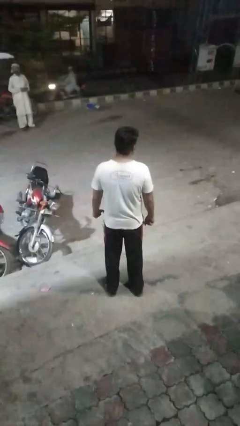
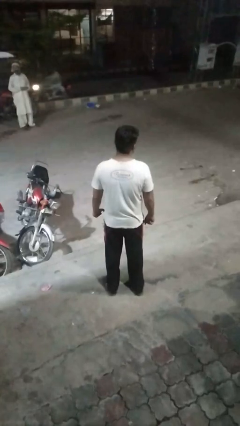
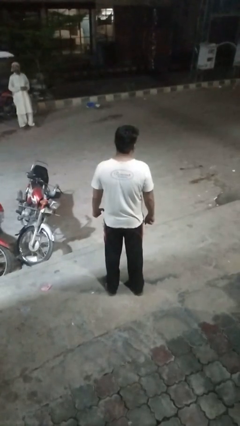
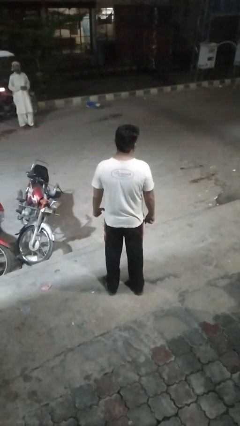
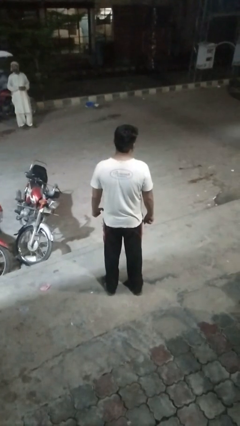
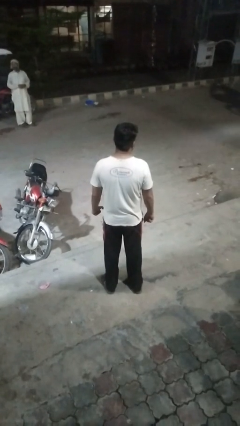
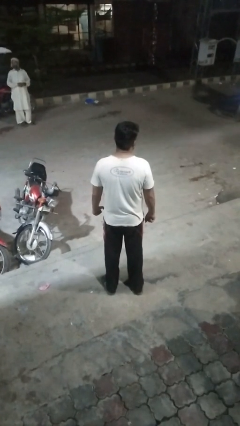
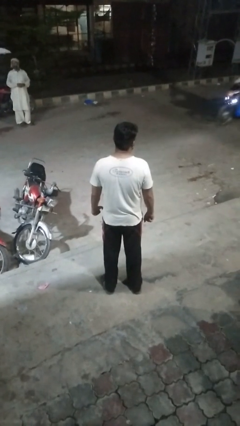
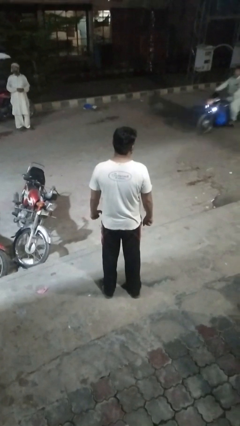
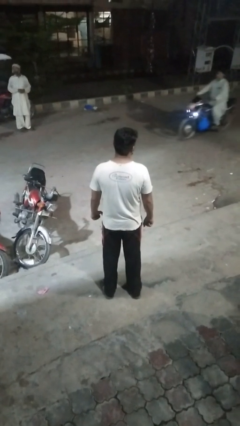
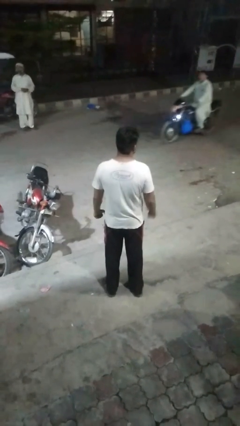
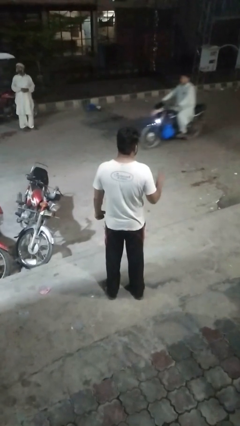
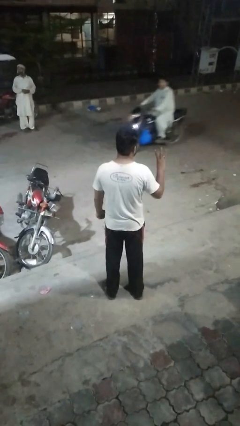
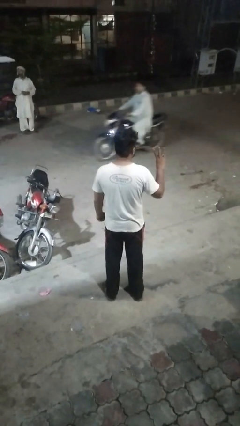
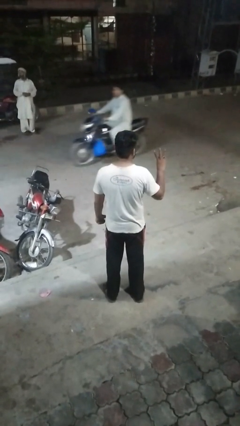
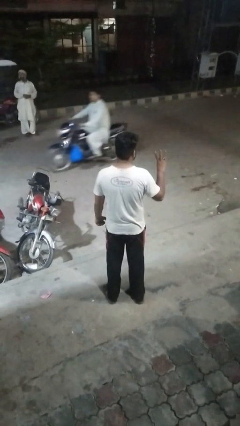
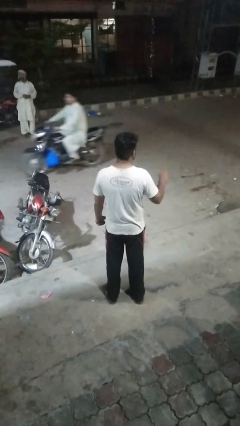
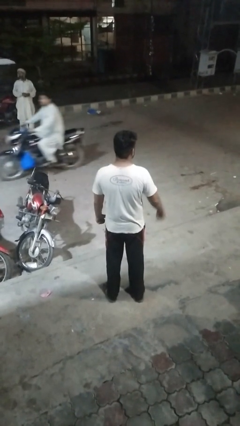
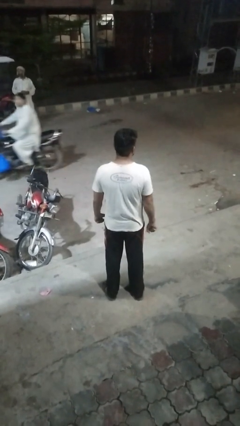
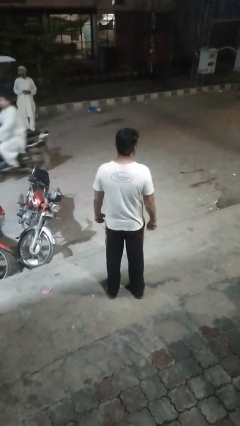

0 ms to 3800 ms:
person gestures number three

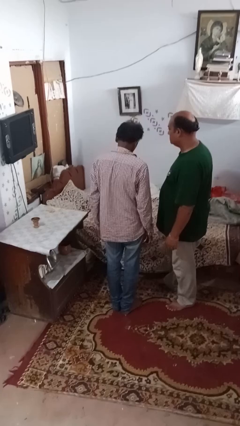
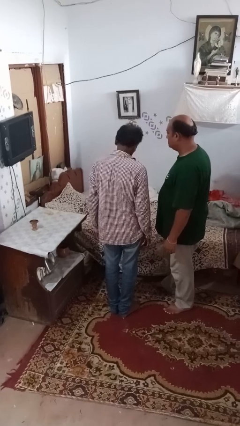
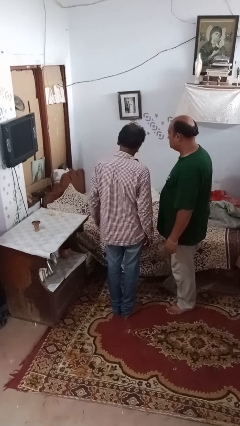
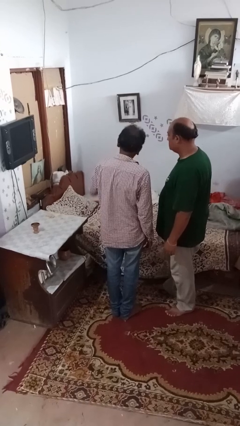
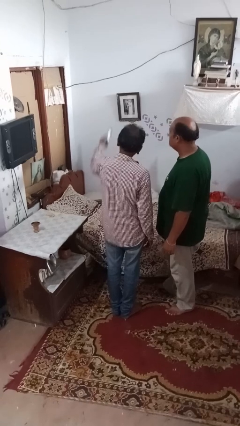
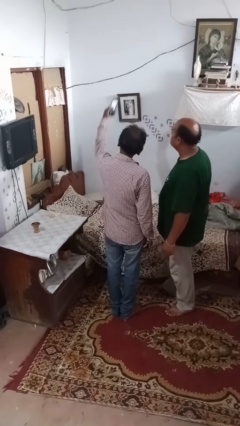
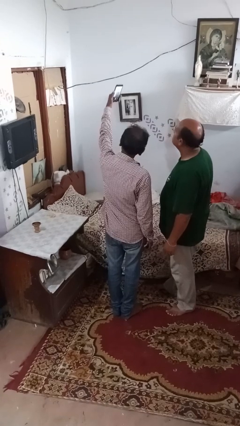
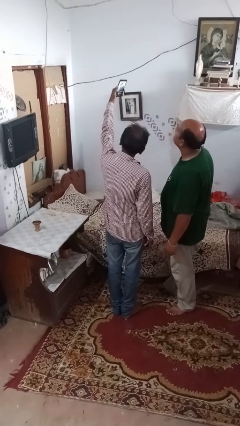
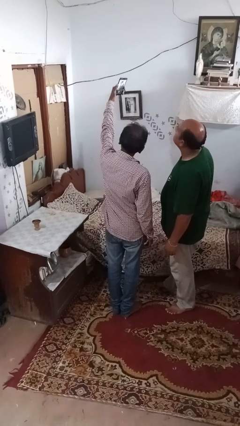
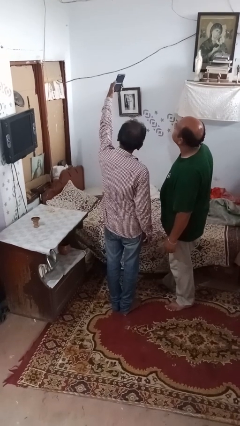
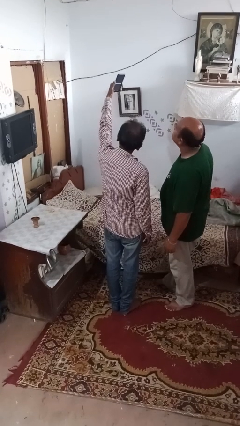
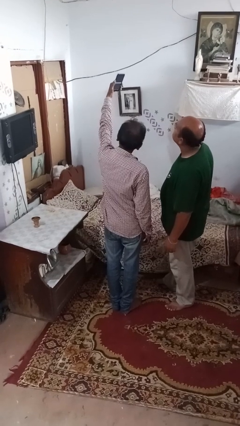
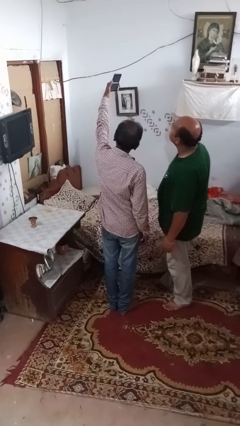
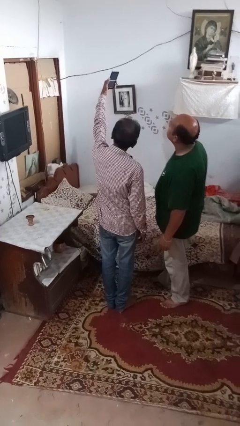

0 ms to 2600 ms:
person takes selfie with person

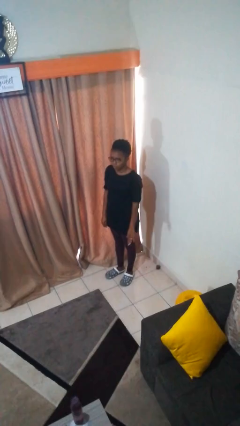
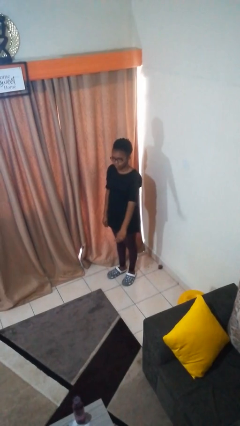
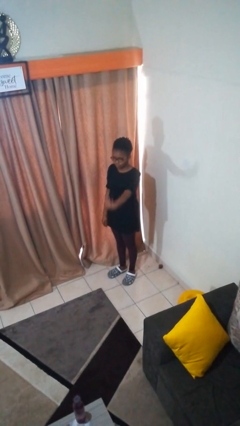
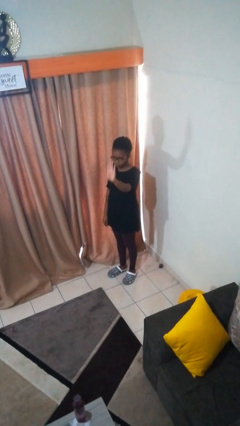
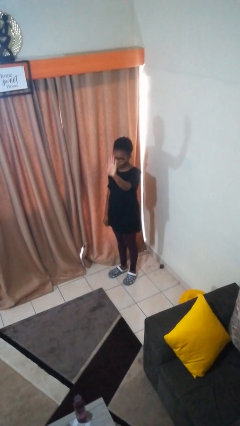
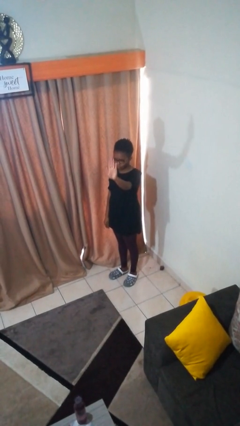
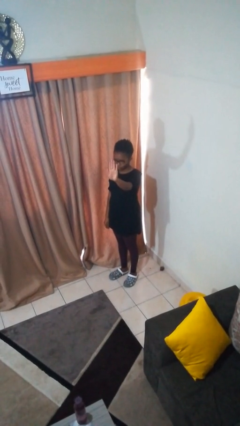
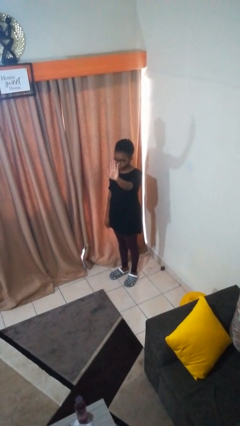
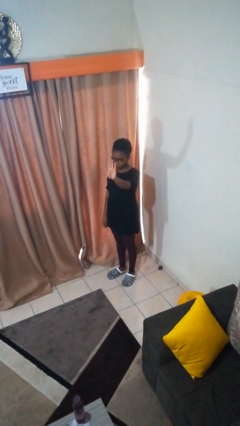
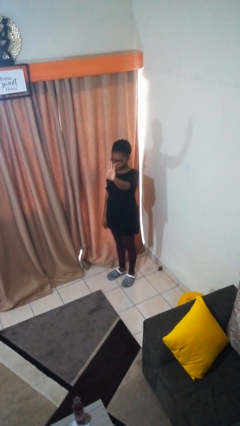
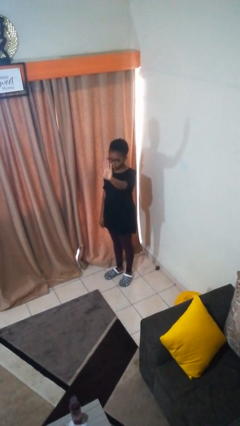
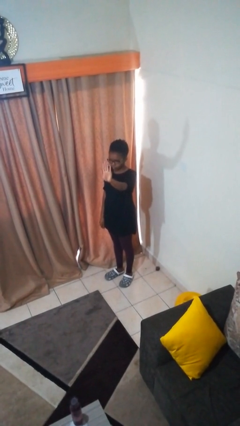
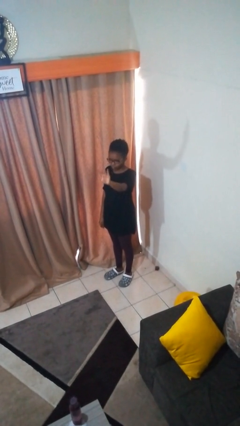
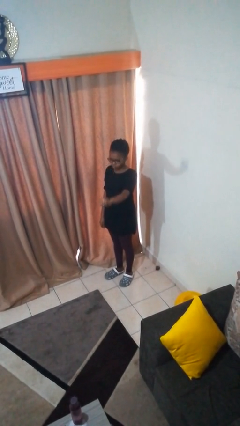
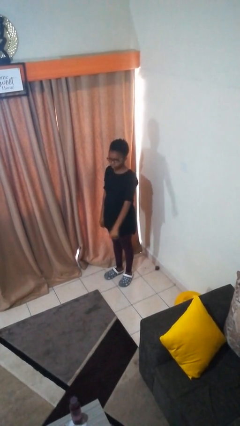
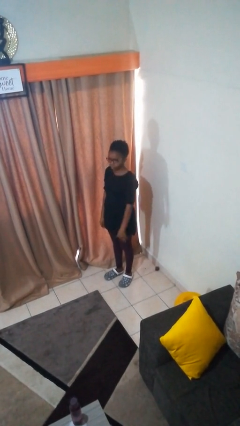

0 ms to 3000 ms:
person gestures stop

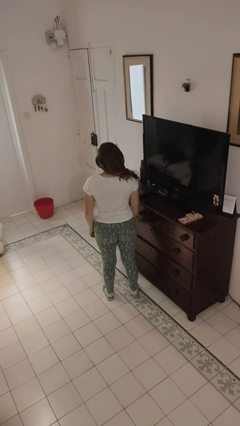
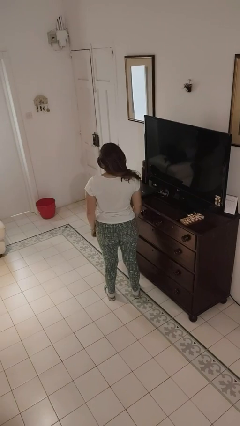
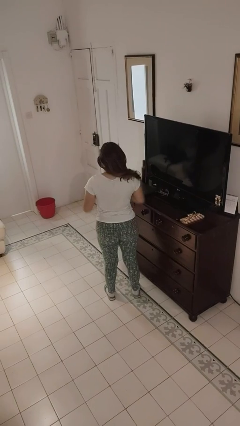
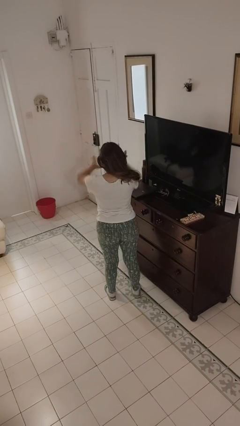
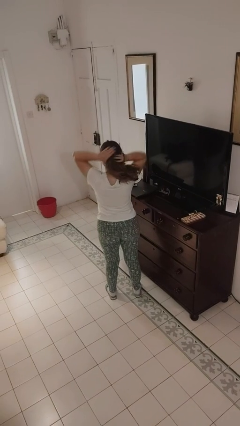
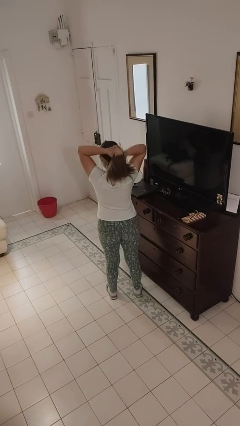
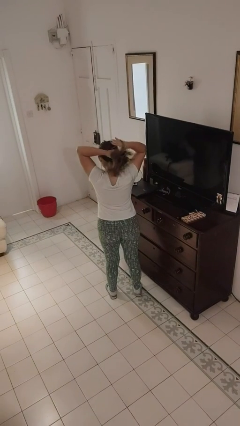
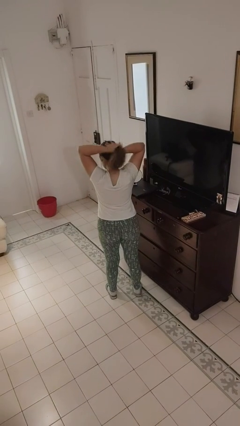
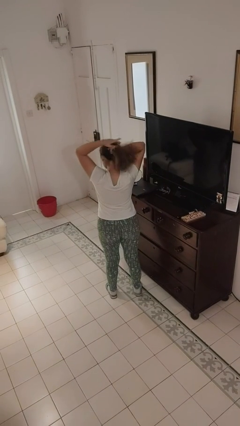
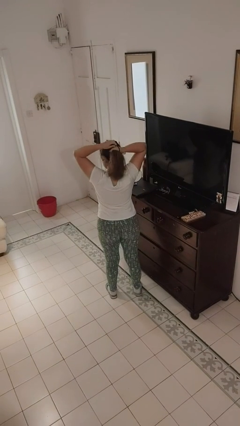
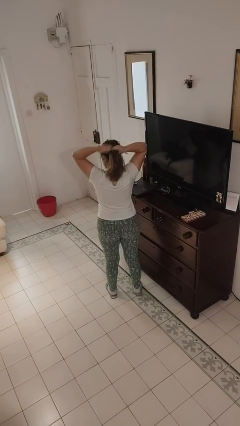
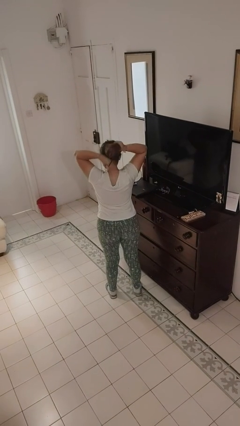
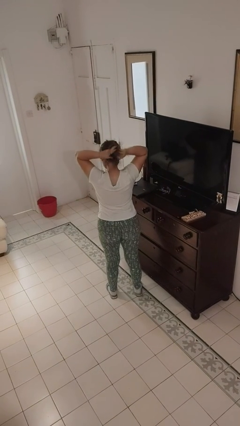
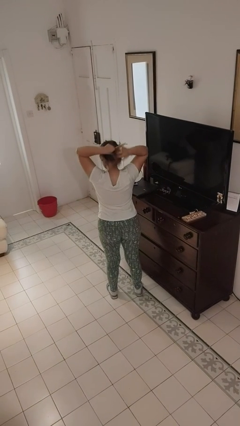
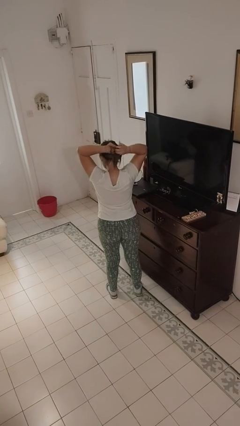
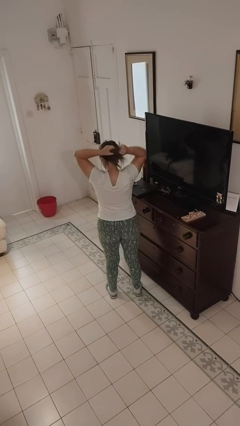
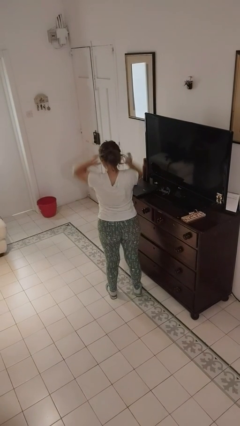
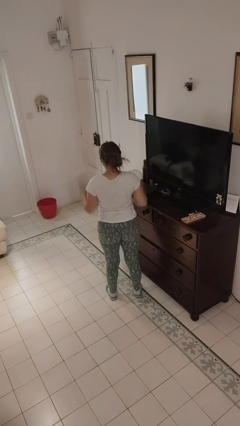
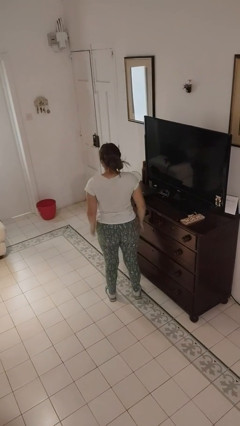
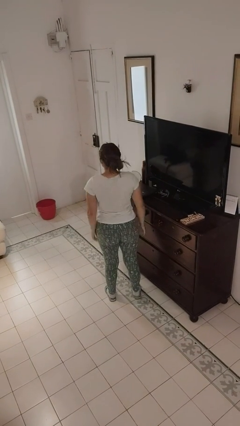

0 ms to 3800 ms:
person puts hair in ponytail

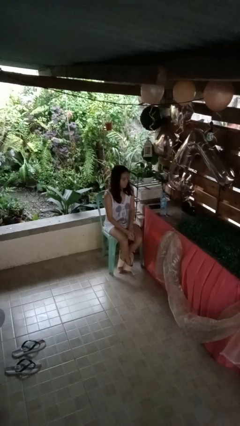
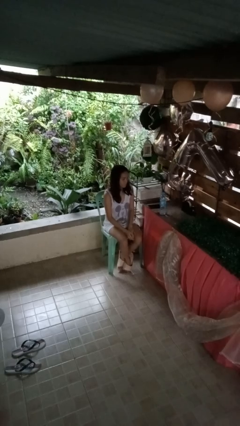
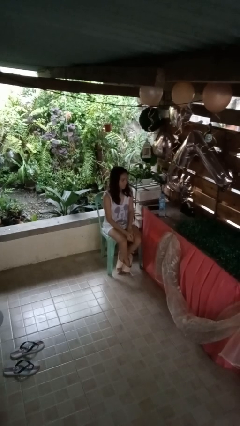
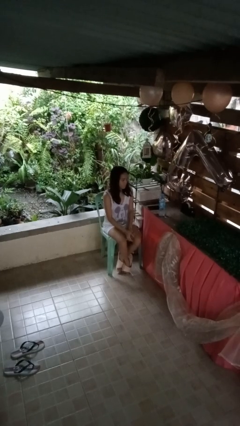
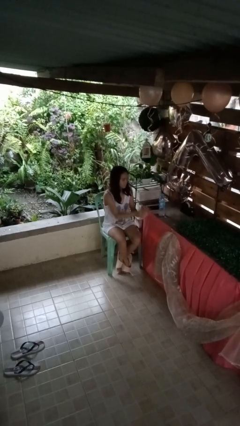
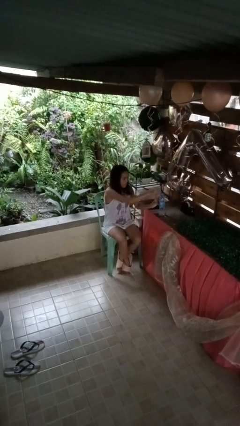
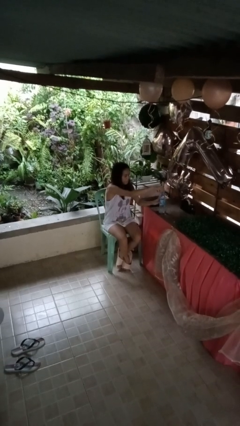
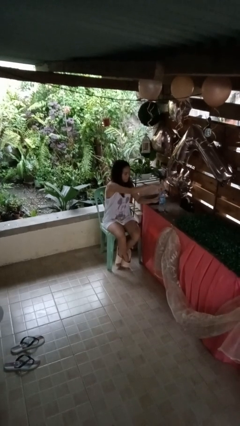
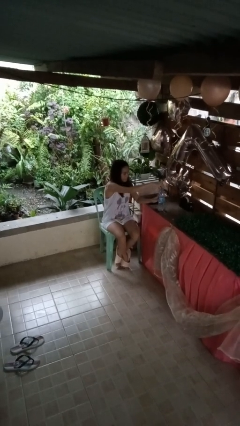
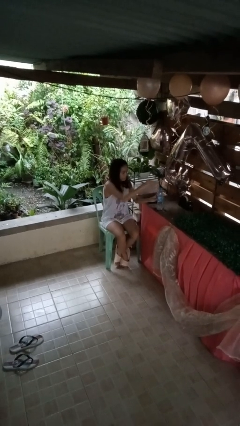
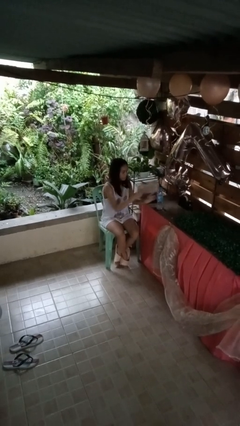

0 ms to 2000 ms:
person unscrews lid from bottle

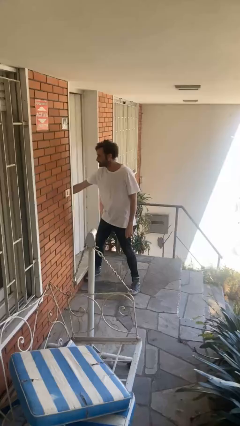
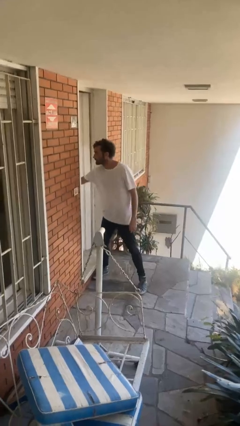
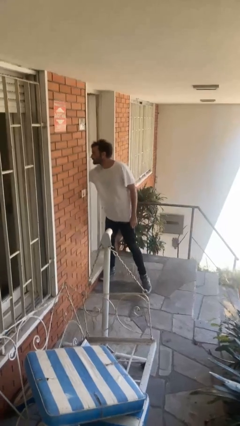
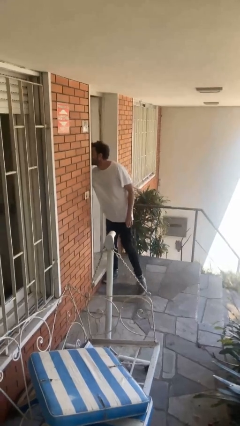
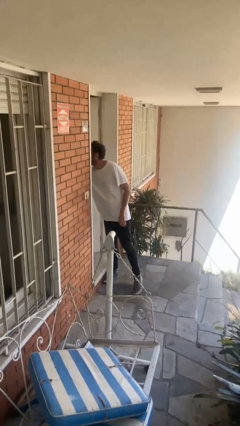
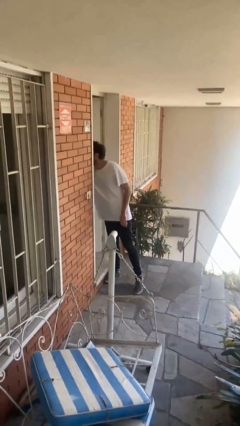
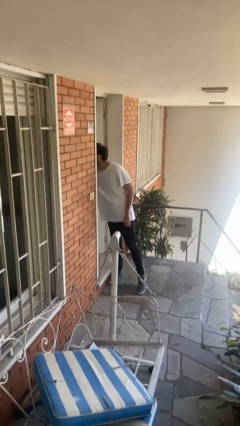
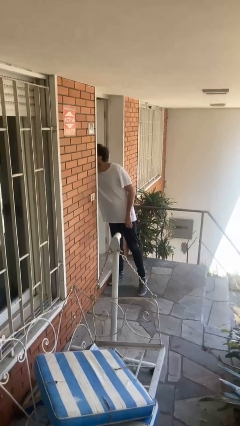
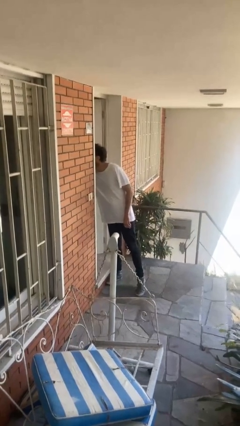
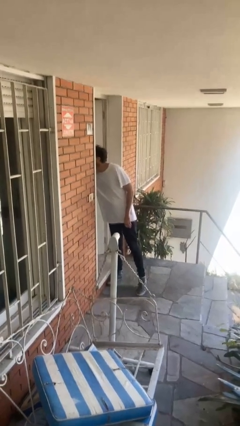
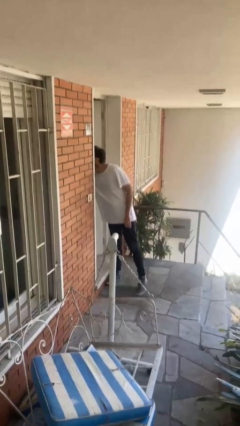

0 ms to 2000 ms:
person opens facility door
